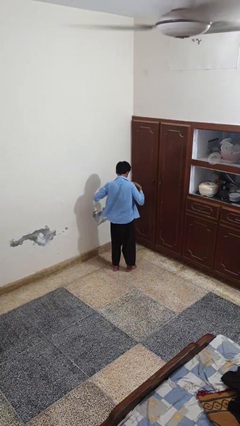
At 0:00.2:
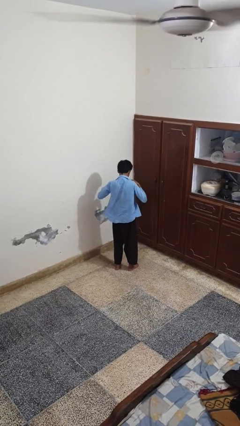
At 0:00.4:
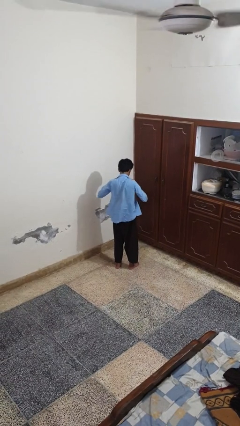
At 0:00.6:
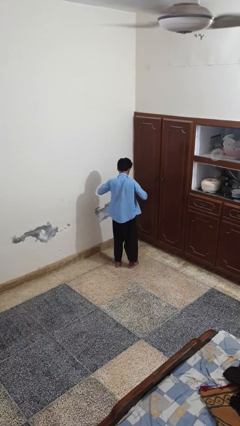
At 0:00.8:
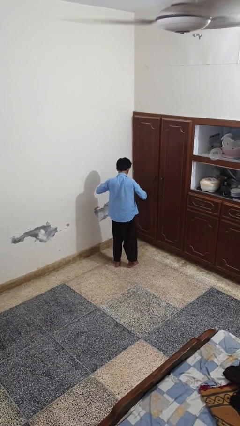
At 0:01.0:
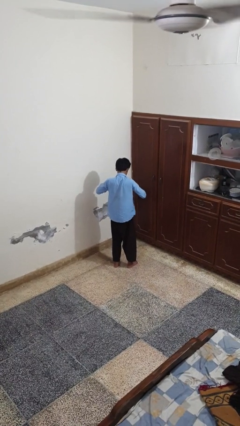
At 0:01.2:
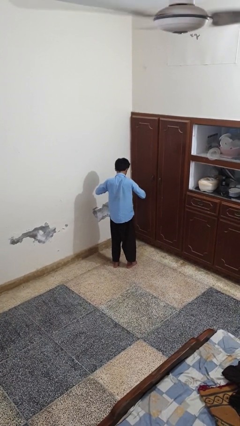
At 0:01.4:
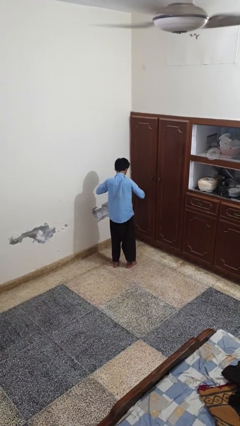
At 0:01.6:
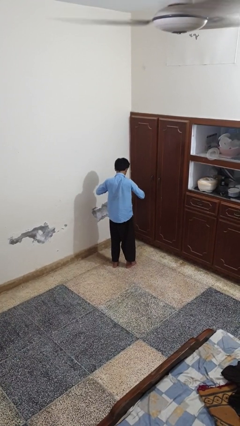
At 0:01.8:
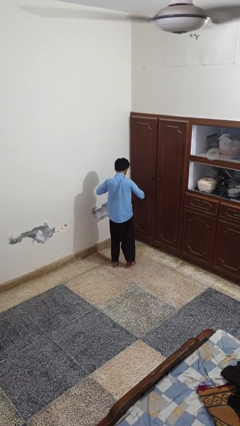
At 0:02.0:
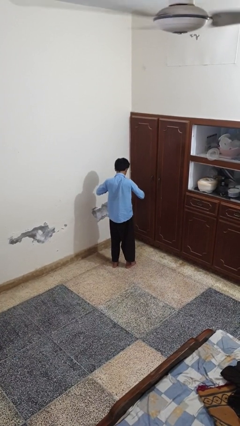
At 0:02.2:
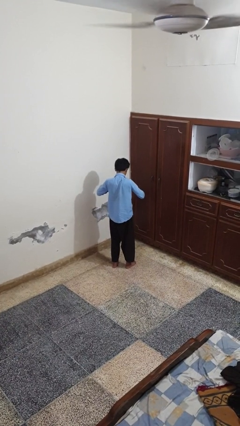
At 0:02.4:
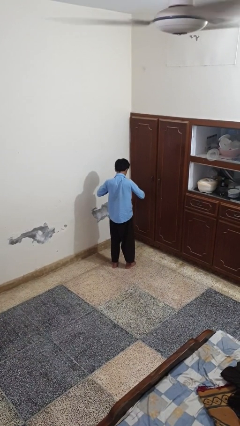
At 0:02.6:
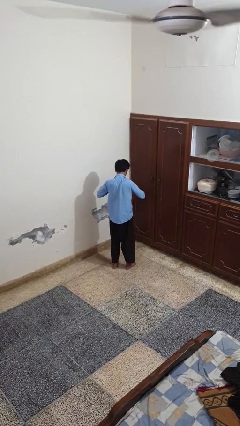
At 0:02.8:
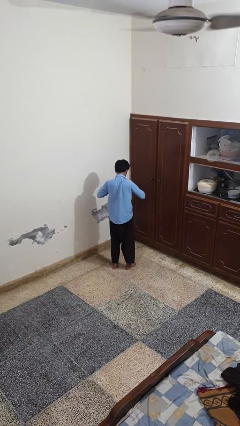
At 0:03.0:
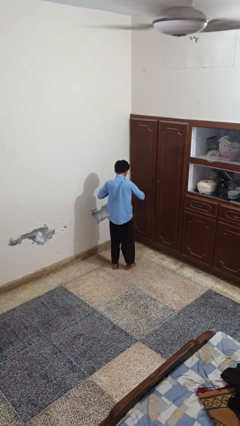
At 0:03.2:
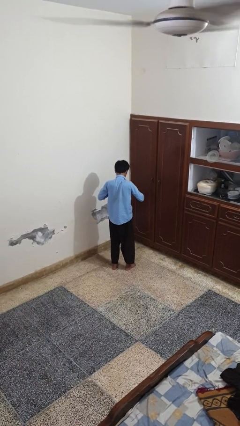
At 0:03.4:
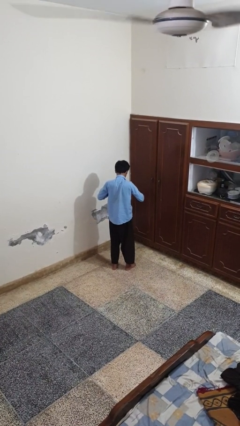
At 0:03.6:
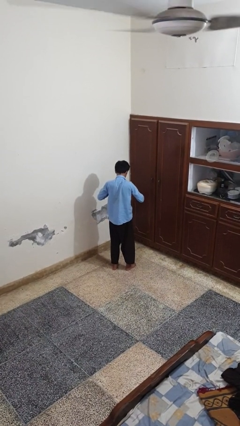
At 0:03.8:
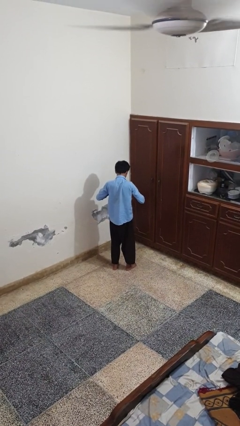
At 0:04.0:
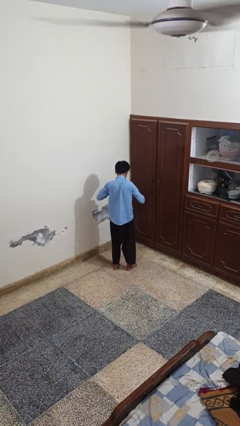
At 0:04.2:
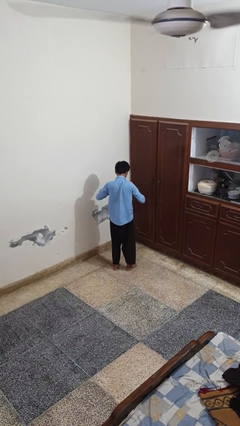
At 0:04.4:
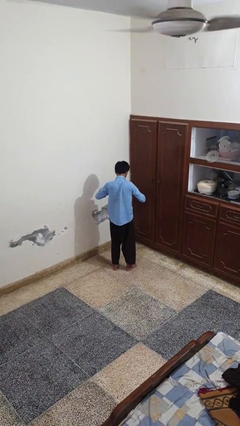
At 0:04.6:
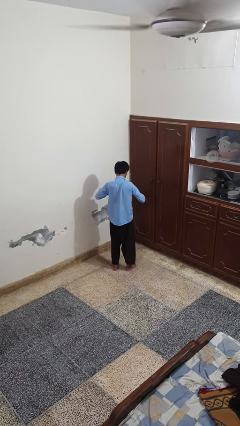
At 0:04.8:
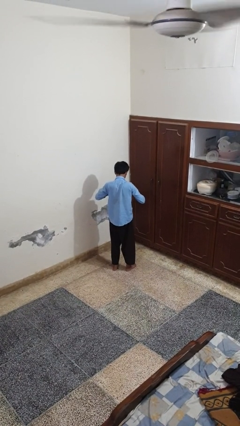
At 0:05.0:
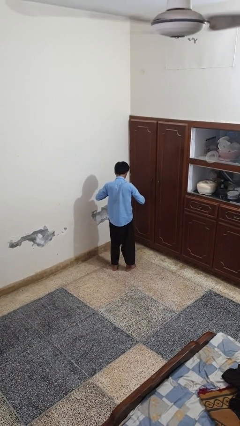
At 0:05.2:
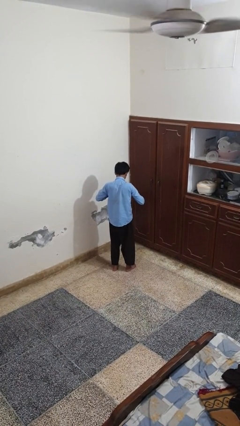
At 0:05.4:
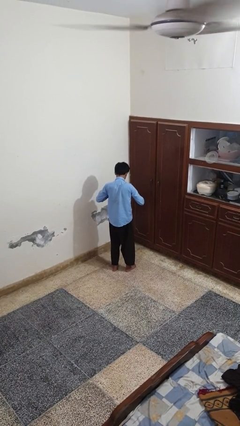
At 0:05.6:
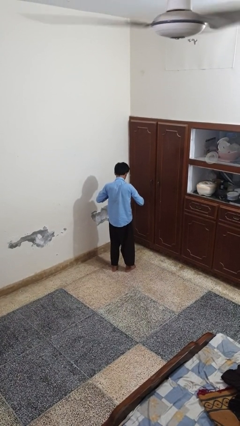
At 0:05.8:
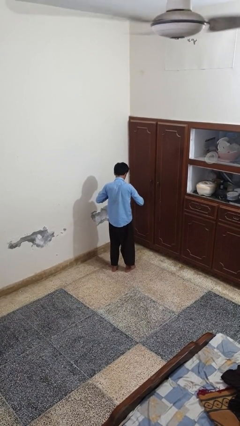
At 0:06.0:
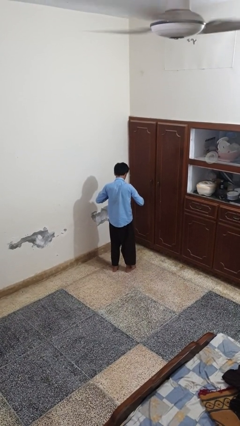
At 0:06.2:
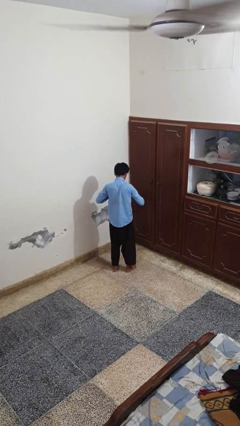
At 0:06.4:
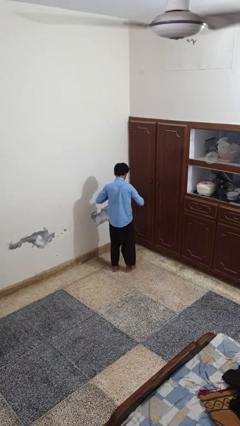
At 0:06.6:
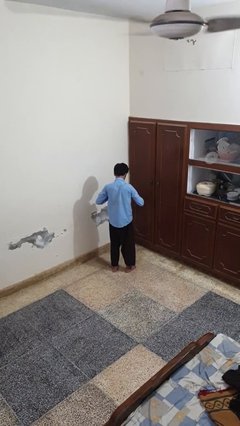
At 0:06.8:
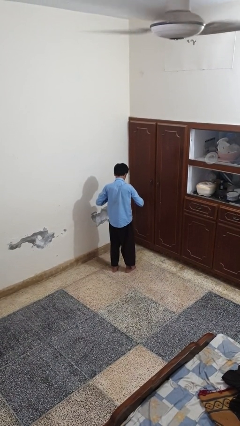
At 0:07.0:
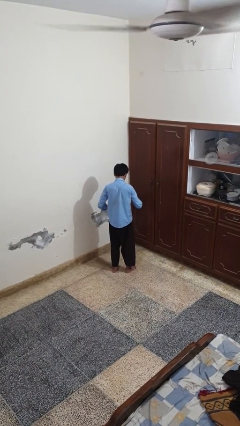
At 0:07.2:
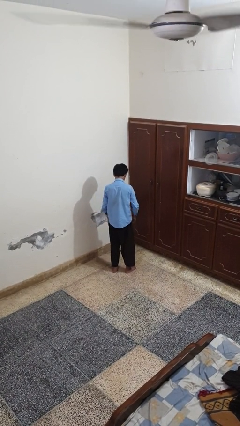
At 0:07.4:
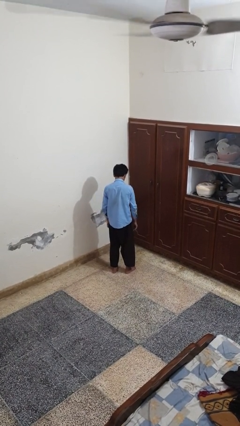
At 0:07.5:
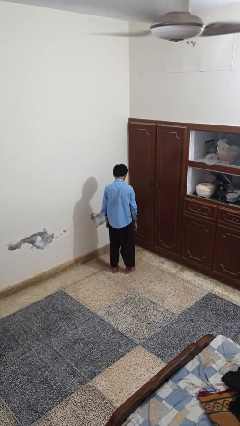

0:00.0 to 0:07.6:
person buttons shirt

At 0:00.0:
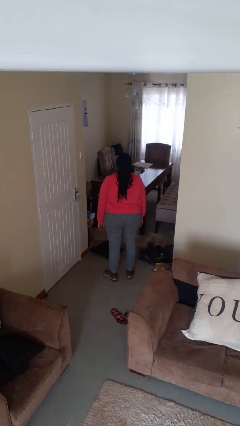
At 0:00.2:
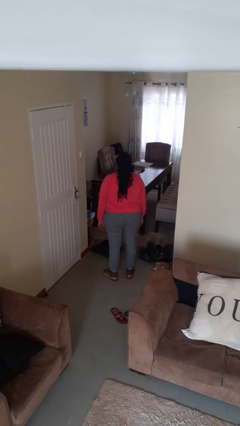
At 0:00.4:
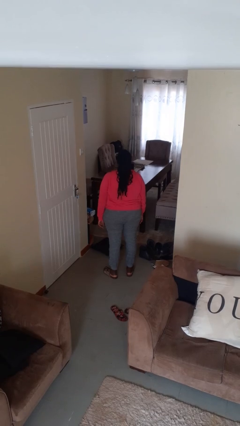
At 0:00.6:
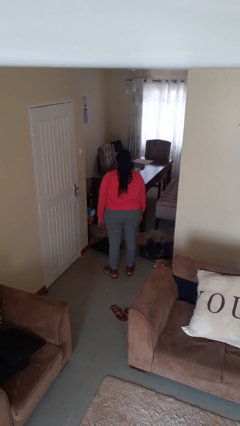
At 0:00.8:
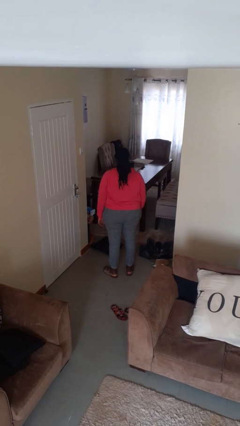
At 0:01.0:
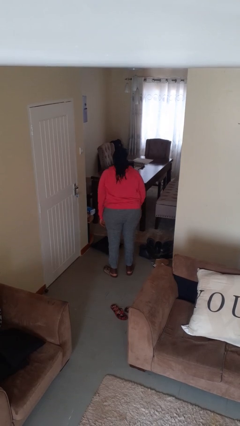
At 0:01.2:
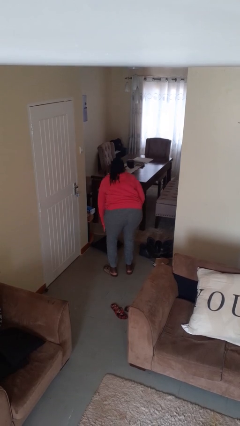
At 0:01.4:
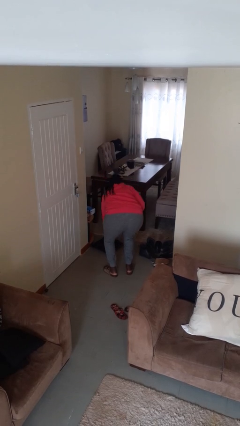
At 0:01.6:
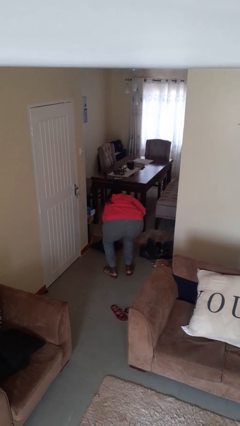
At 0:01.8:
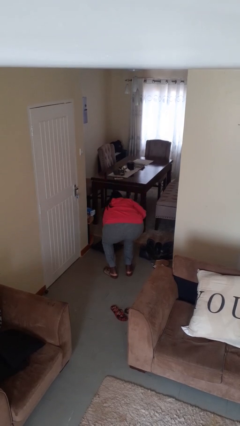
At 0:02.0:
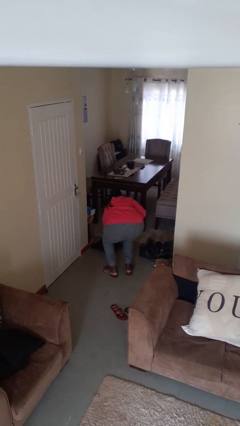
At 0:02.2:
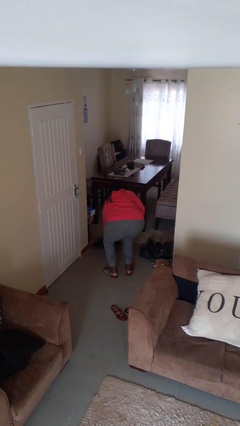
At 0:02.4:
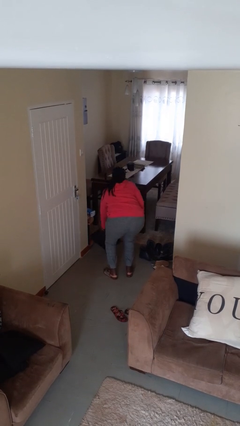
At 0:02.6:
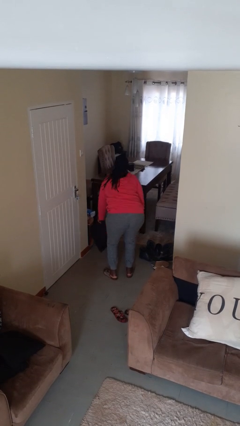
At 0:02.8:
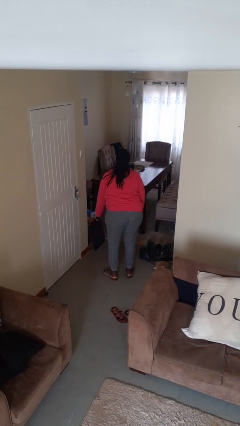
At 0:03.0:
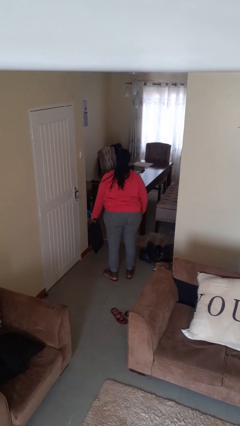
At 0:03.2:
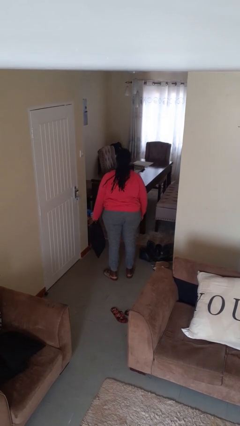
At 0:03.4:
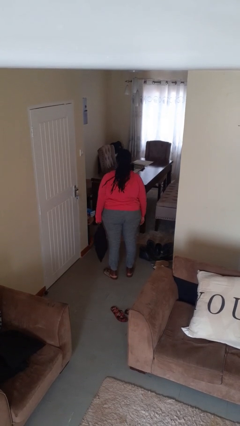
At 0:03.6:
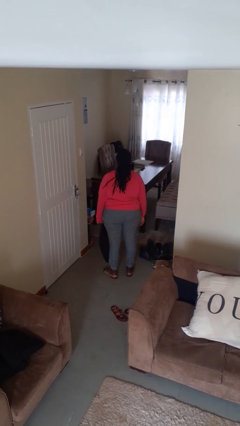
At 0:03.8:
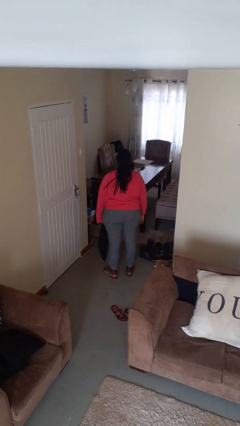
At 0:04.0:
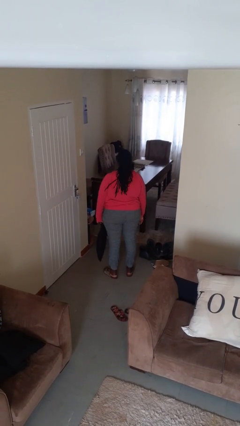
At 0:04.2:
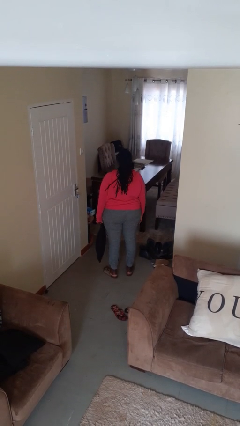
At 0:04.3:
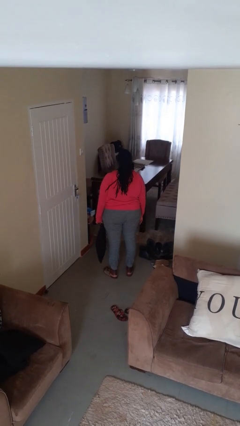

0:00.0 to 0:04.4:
person picks up object from floor

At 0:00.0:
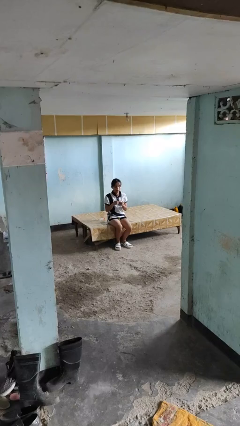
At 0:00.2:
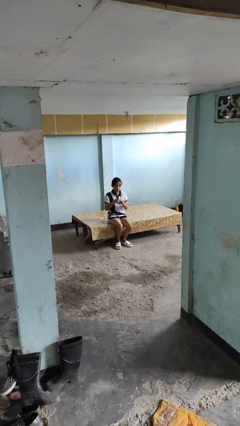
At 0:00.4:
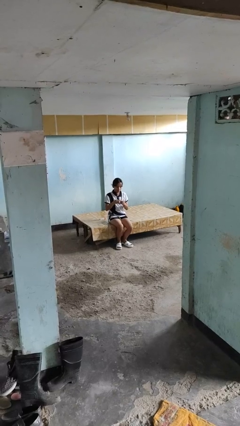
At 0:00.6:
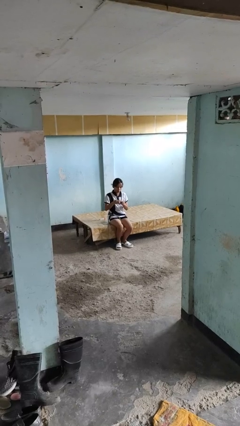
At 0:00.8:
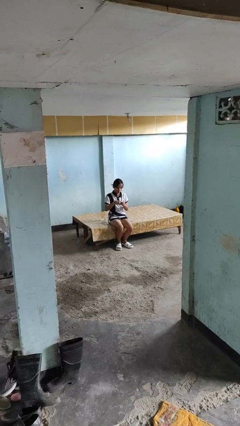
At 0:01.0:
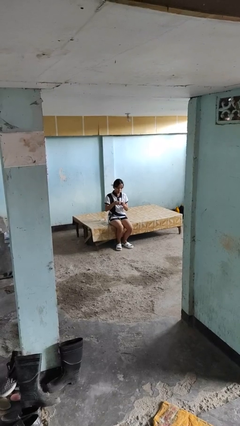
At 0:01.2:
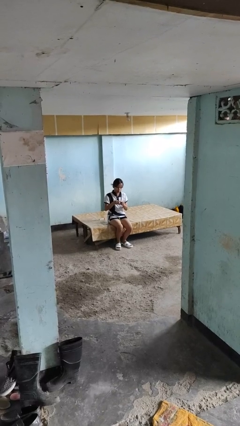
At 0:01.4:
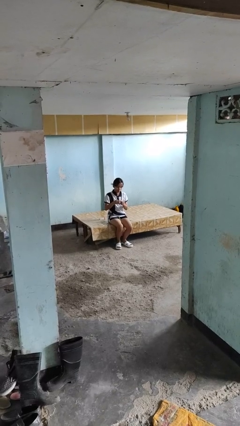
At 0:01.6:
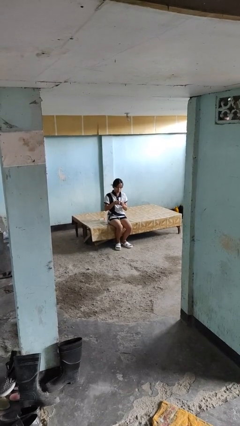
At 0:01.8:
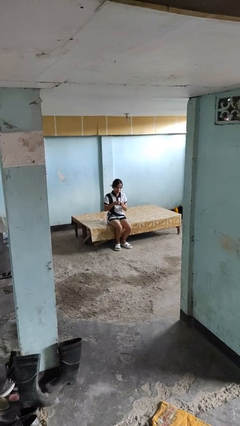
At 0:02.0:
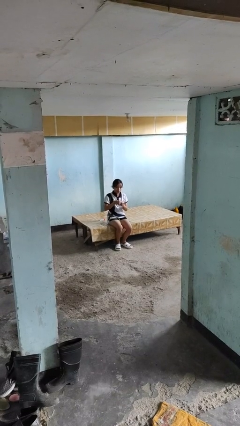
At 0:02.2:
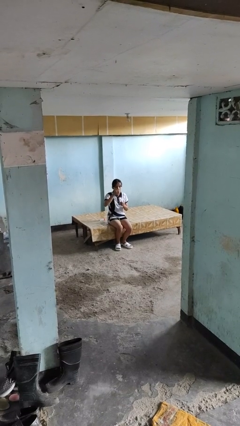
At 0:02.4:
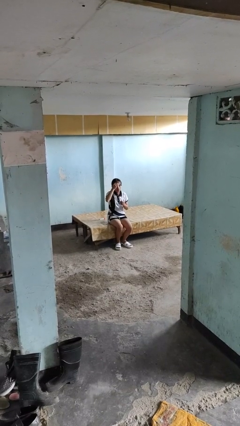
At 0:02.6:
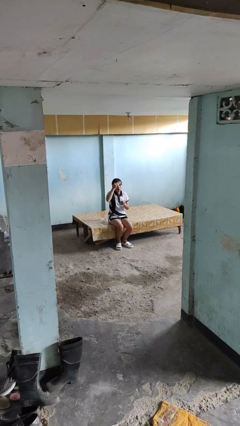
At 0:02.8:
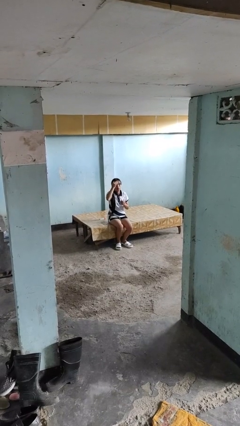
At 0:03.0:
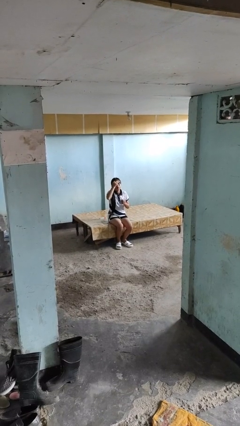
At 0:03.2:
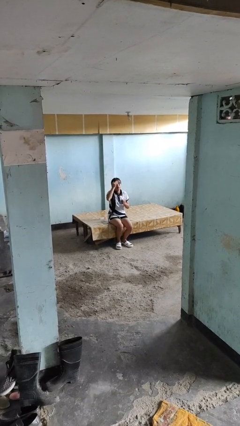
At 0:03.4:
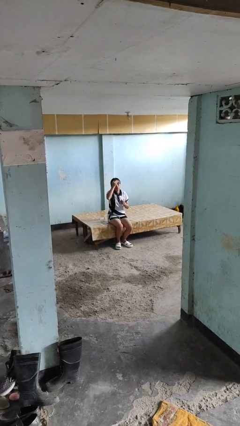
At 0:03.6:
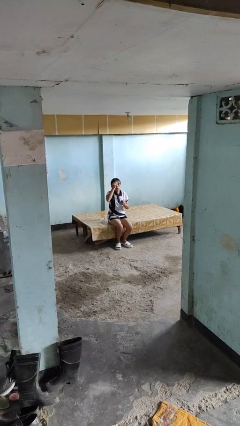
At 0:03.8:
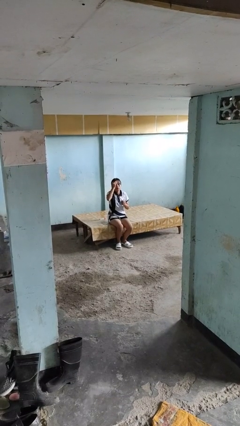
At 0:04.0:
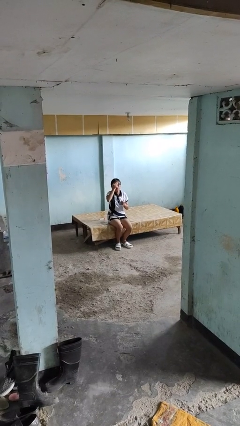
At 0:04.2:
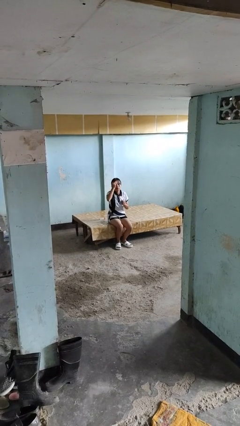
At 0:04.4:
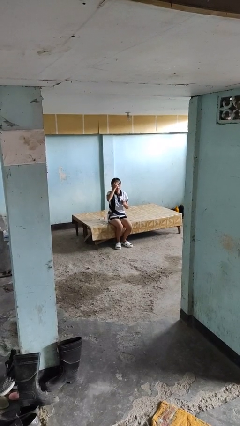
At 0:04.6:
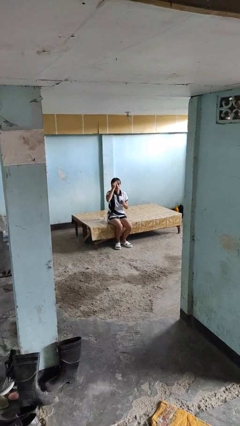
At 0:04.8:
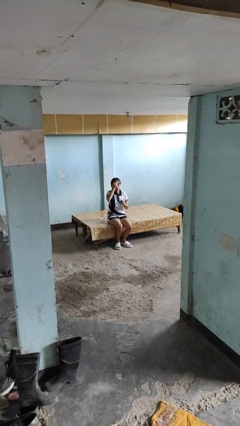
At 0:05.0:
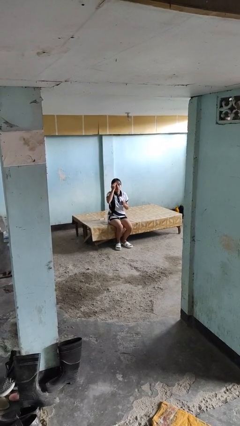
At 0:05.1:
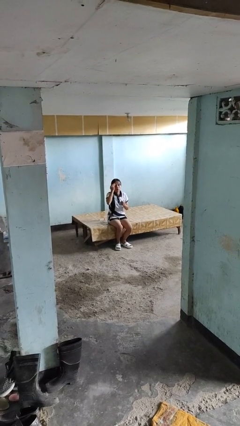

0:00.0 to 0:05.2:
person applies facial moisturizer

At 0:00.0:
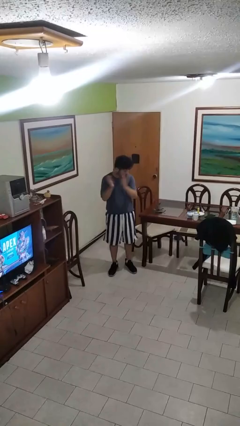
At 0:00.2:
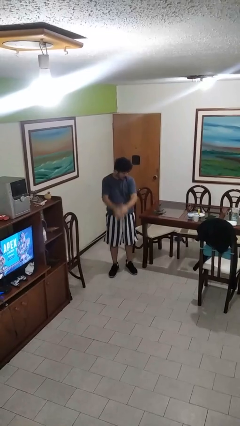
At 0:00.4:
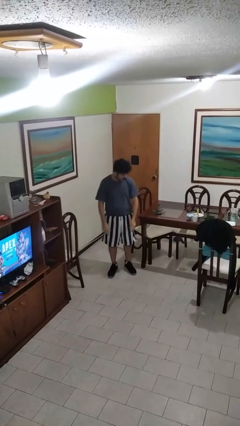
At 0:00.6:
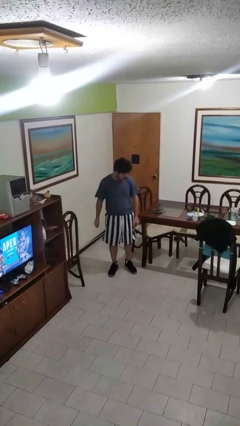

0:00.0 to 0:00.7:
person claps hands
